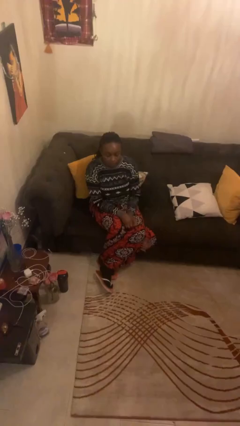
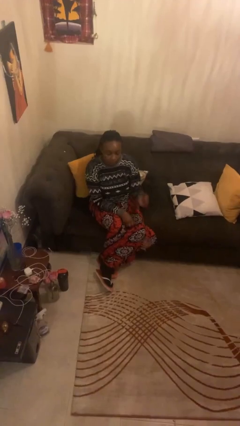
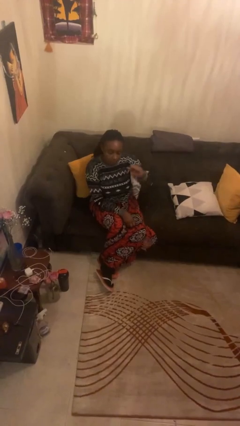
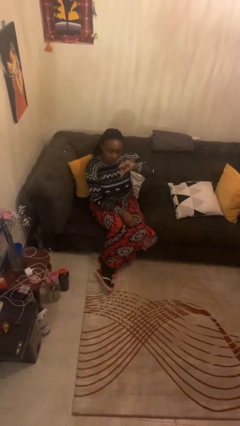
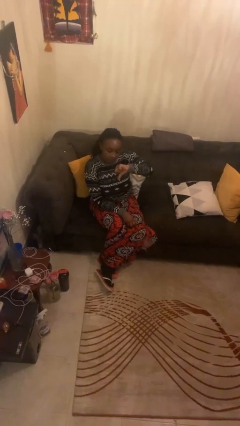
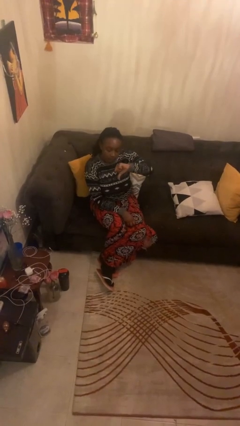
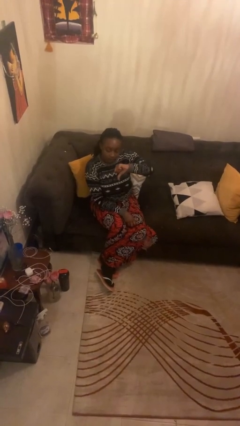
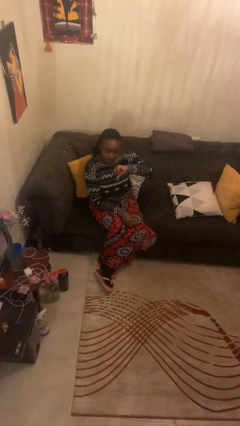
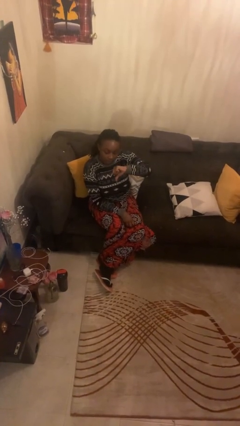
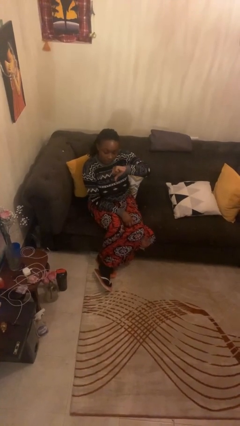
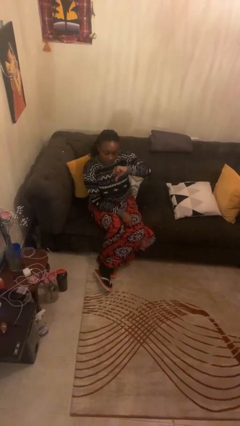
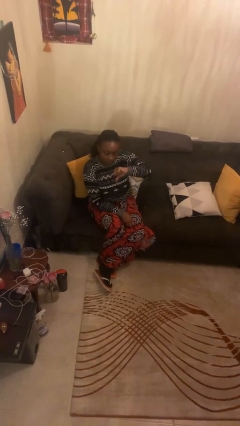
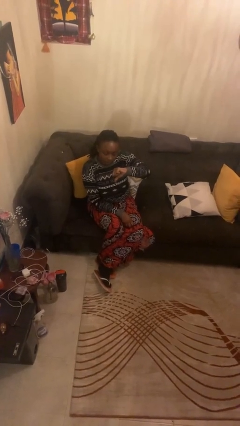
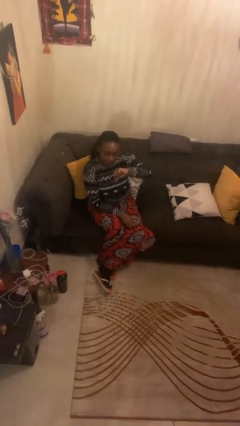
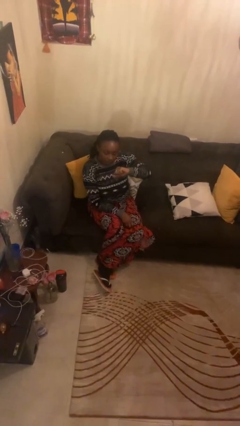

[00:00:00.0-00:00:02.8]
person gestures thumbs down

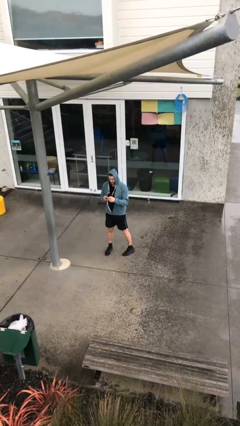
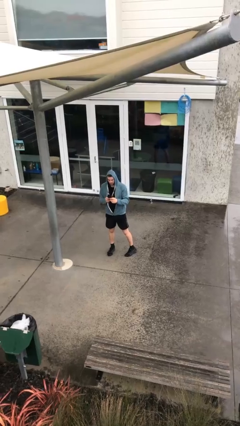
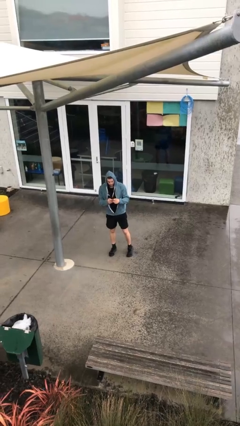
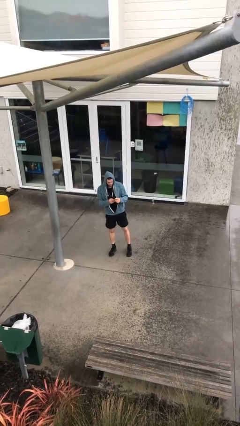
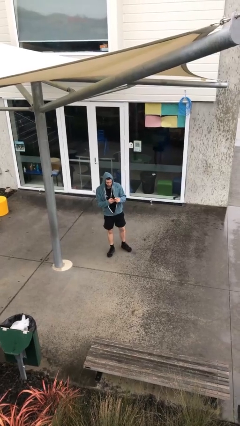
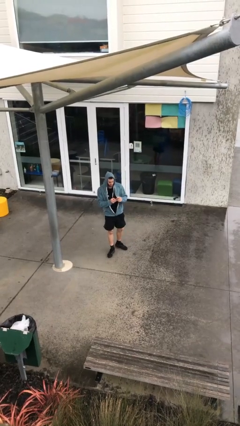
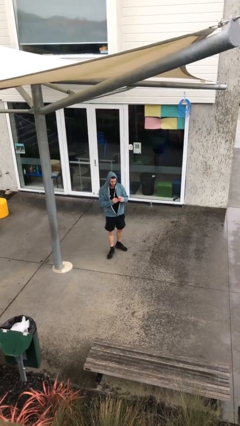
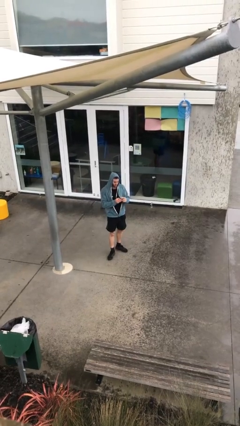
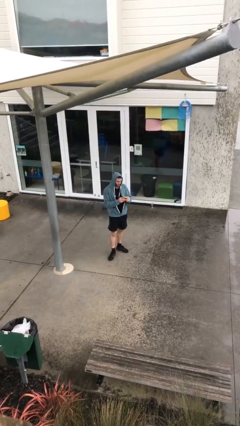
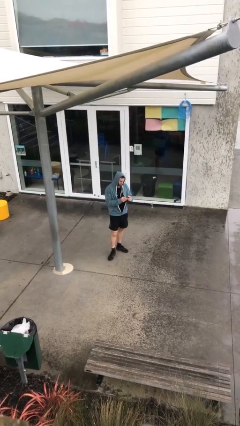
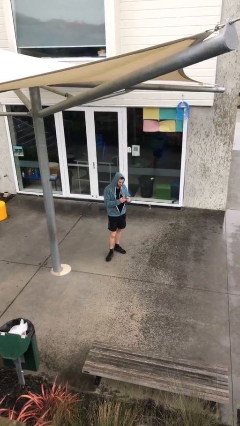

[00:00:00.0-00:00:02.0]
person texts on phone

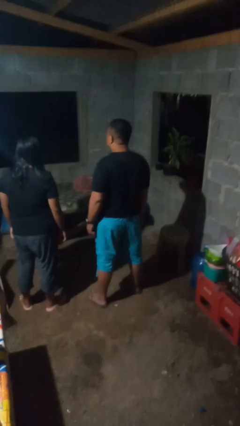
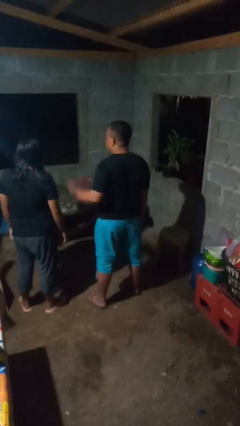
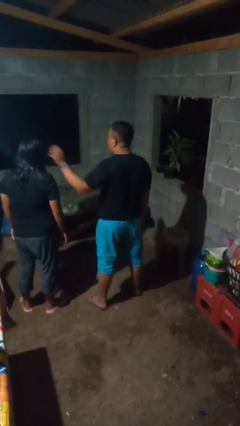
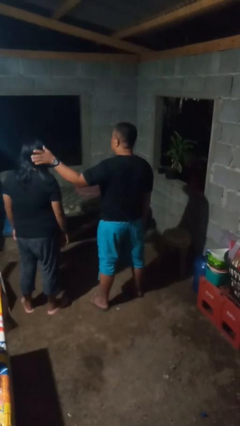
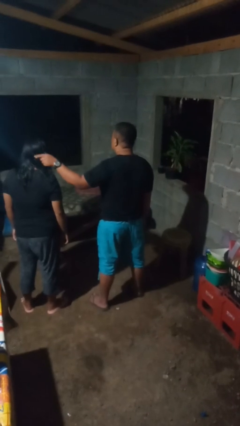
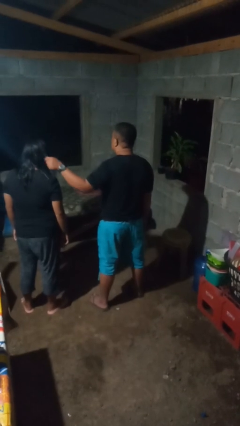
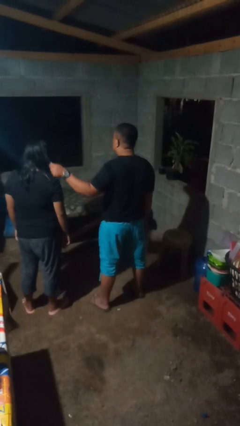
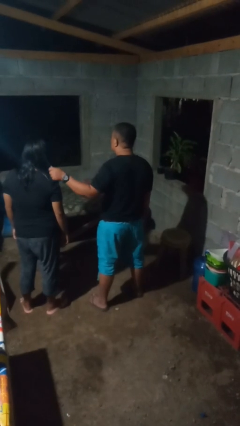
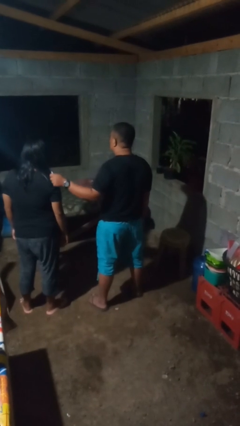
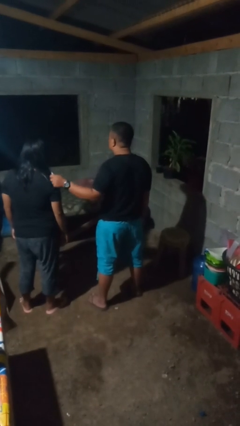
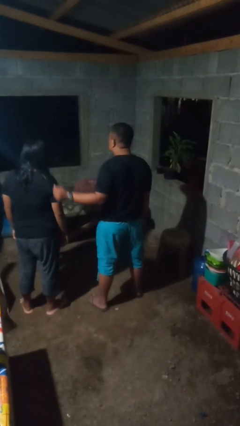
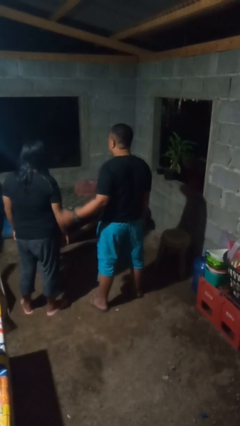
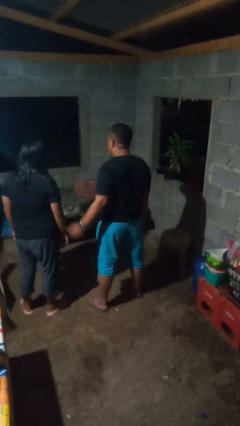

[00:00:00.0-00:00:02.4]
person grabs person by hair

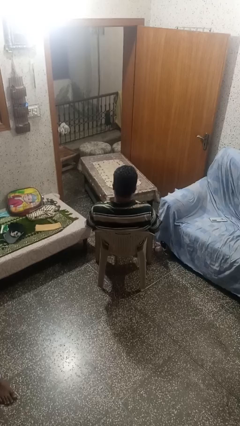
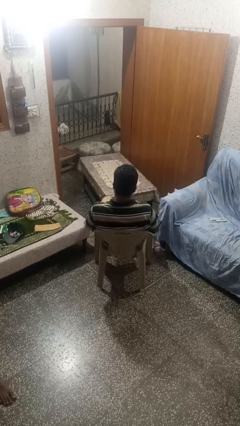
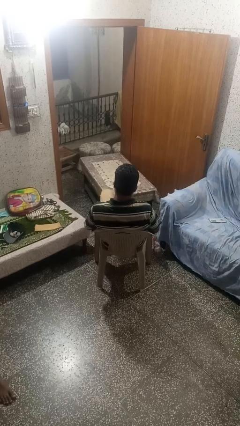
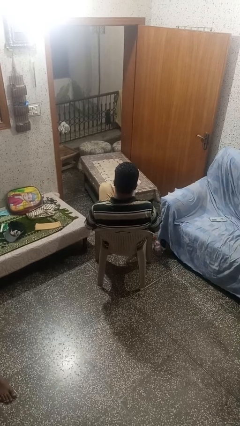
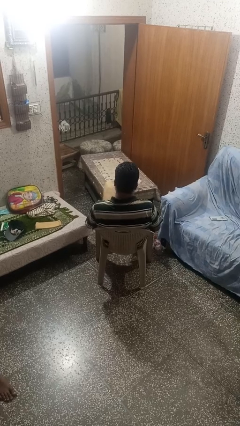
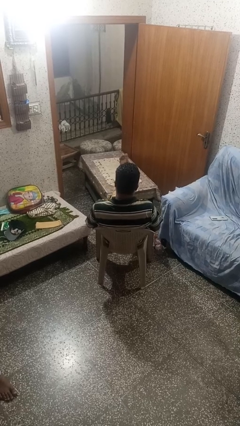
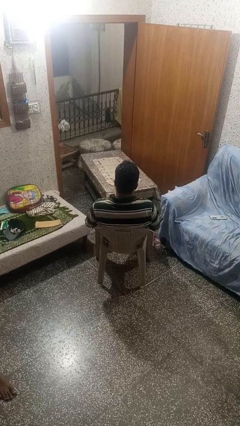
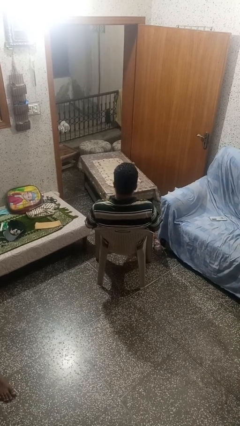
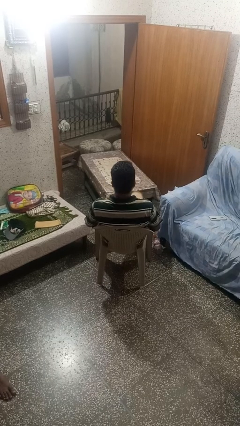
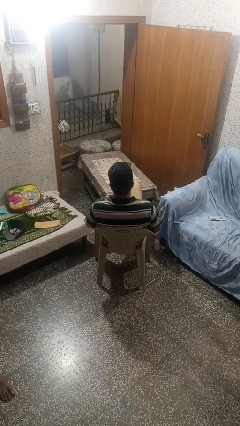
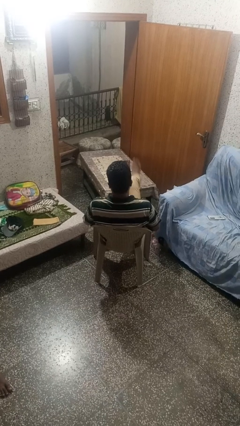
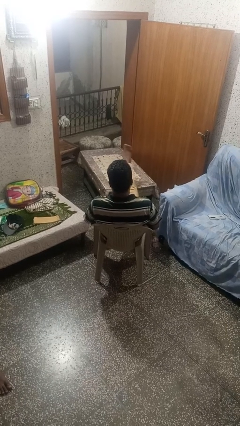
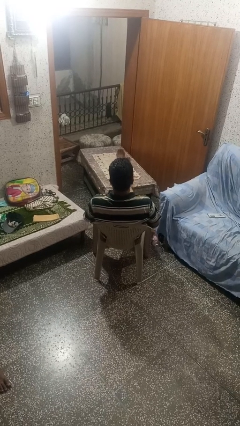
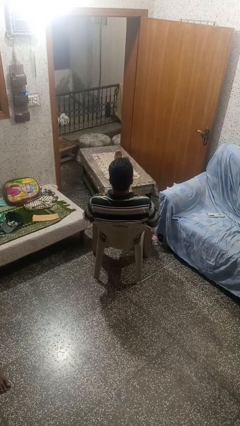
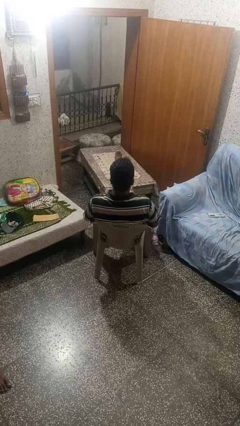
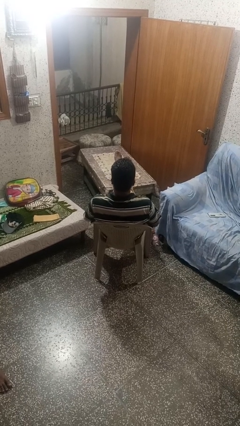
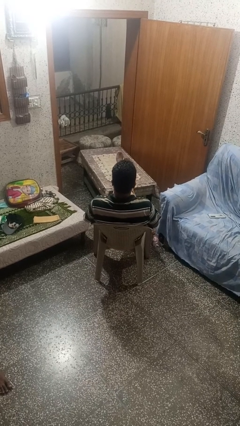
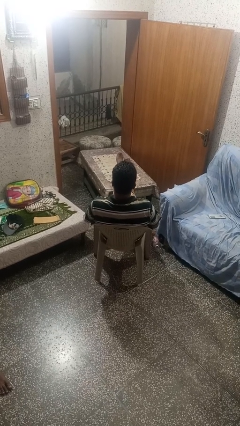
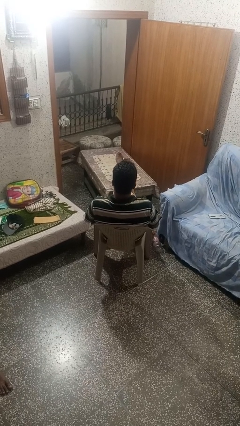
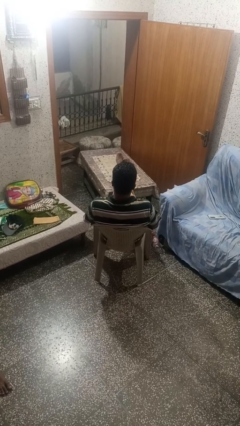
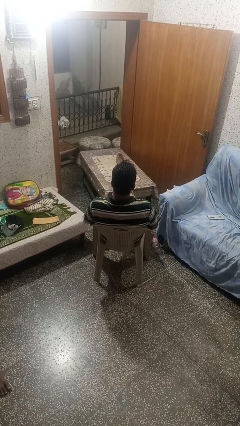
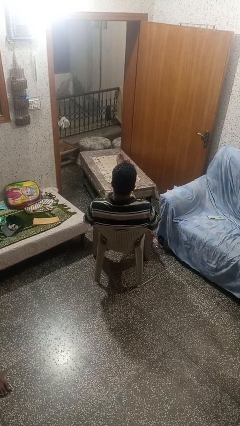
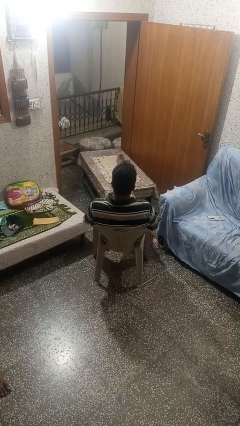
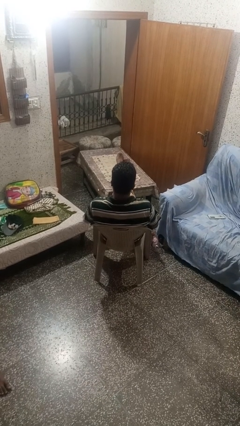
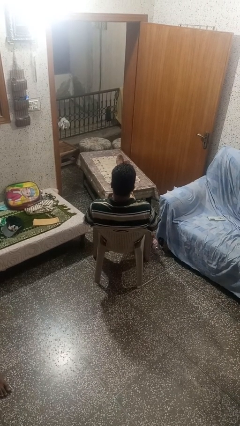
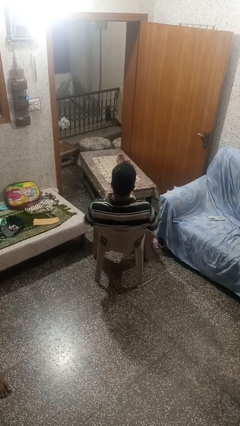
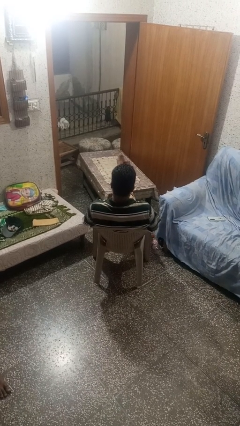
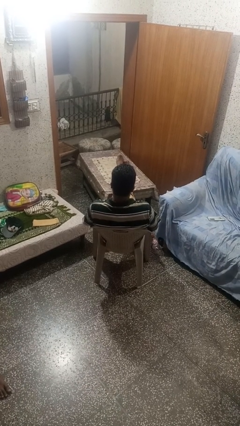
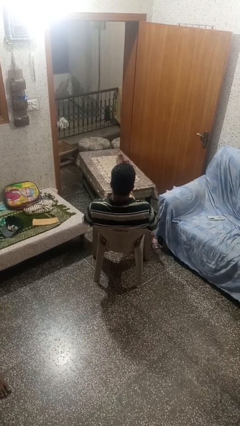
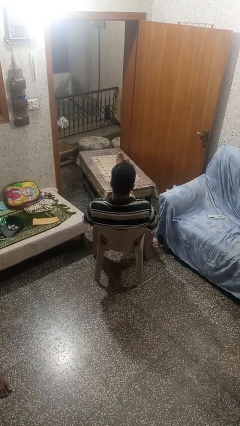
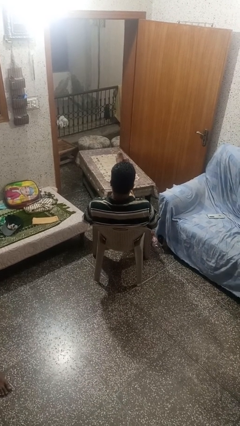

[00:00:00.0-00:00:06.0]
person puts feet up

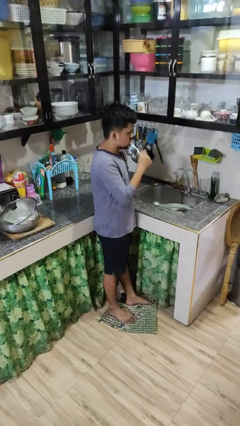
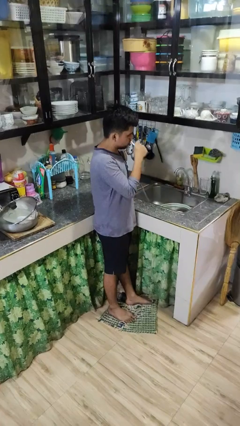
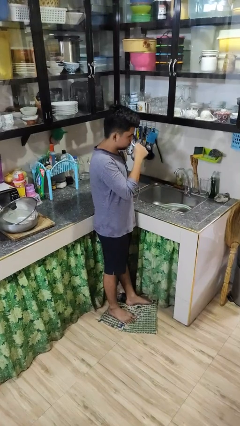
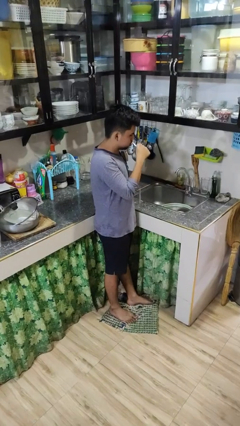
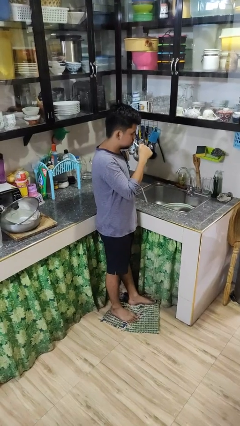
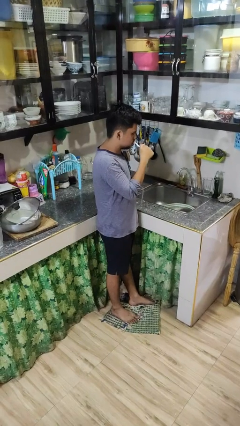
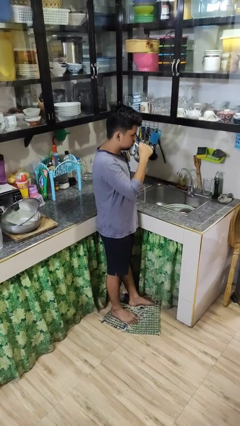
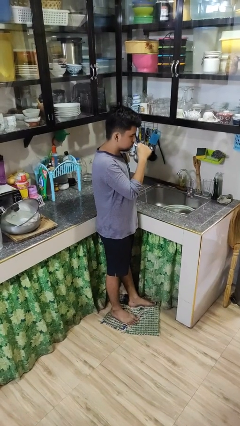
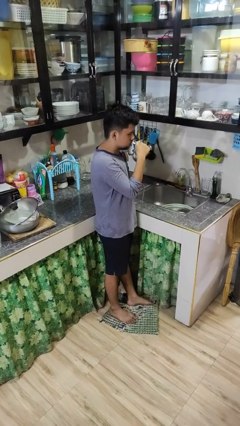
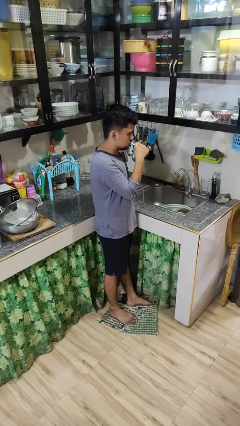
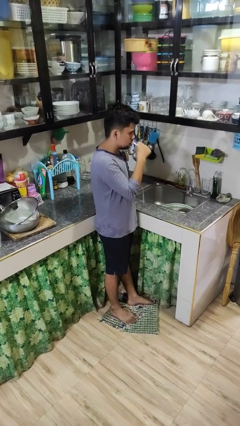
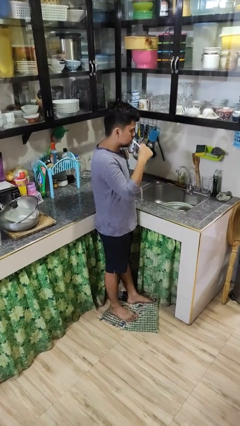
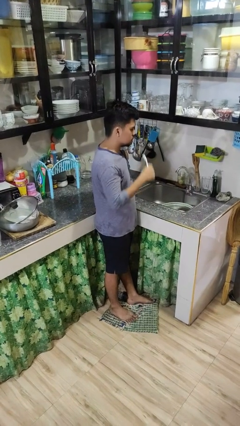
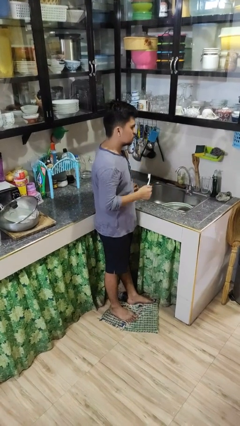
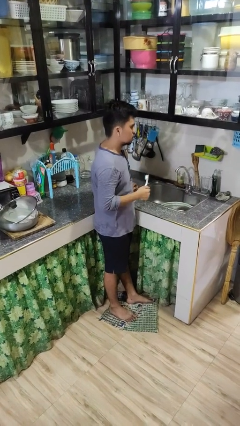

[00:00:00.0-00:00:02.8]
person brushes teeth

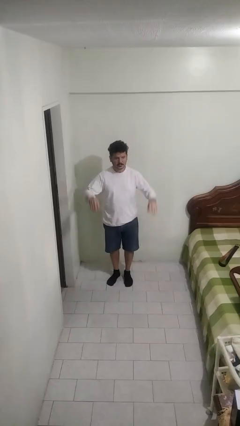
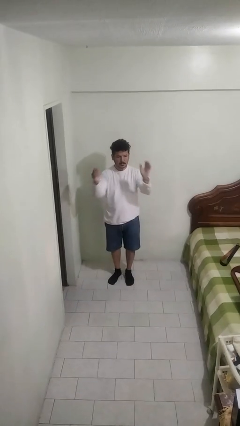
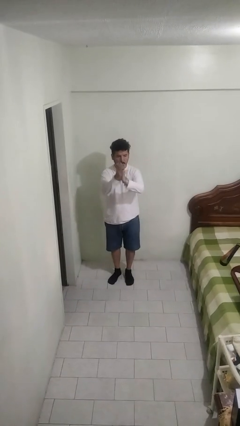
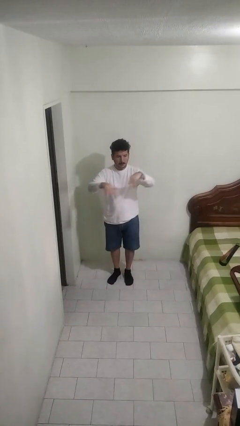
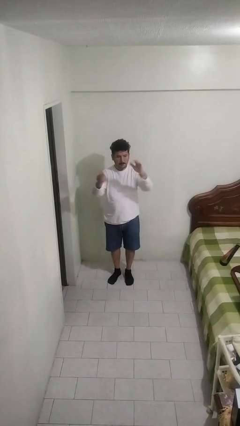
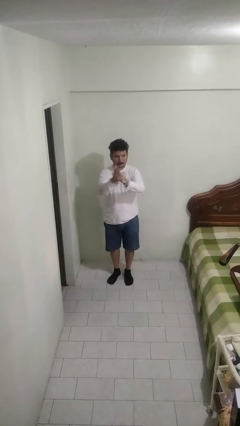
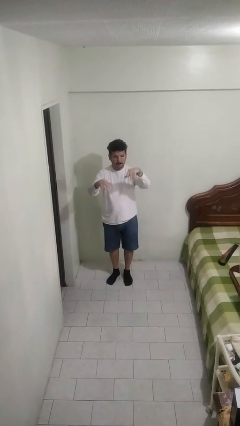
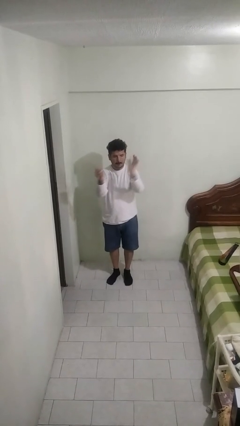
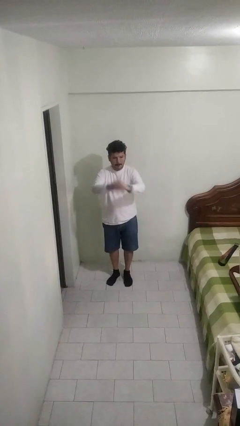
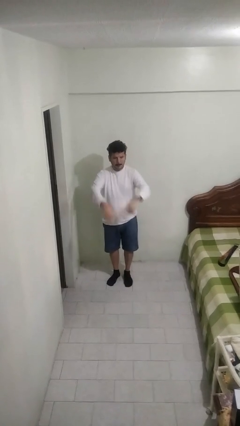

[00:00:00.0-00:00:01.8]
person claps hands
